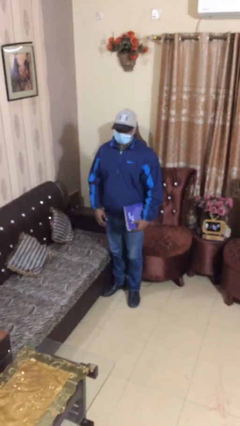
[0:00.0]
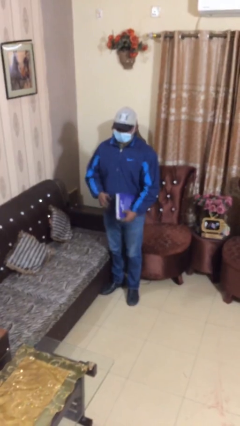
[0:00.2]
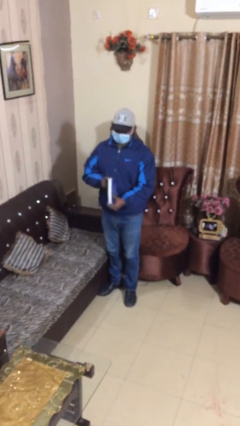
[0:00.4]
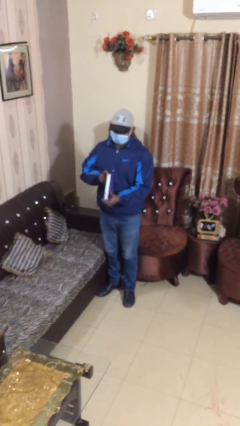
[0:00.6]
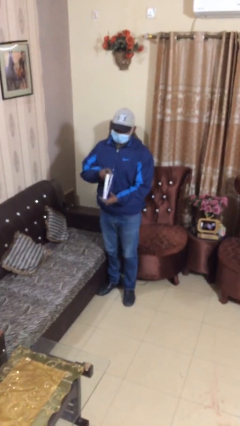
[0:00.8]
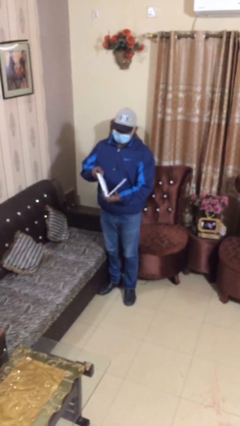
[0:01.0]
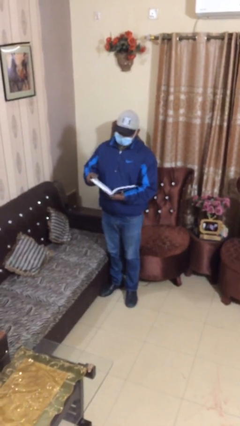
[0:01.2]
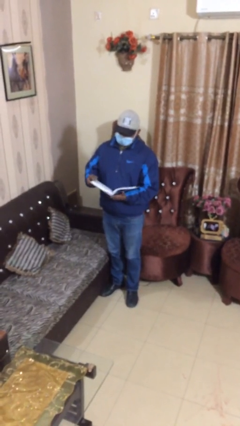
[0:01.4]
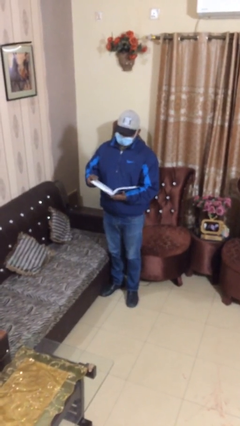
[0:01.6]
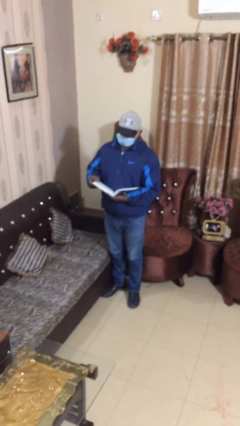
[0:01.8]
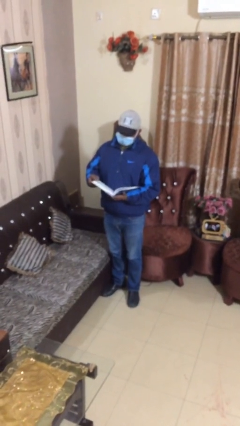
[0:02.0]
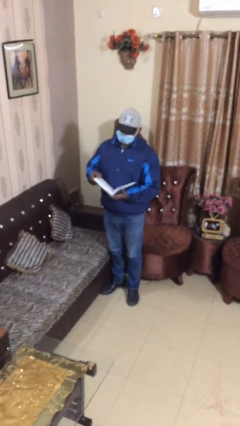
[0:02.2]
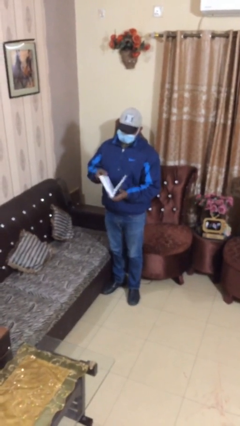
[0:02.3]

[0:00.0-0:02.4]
person reads document

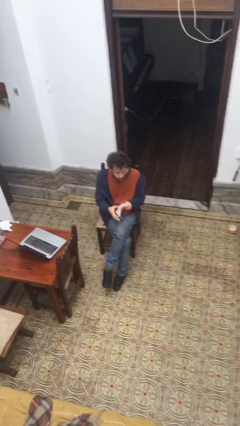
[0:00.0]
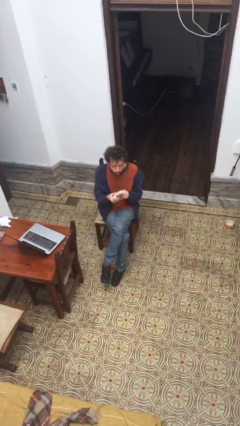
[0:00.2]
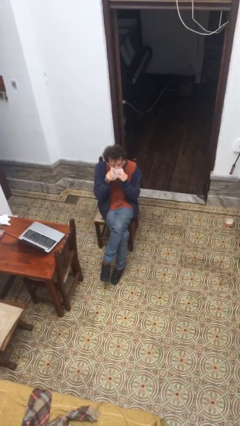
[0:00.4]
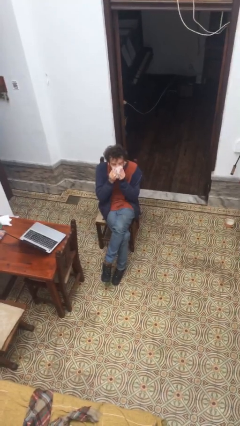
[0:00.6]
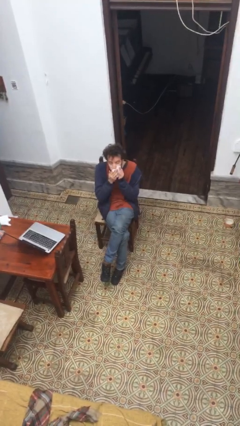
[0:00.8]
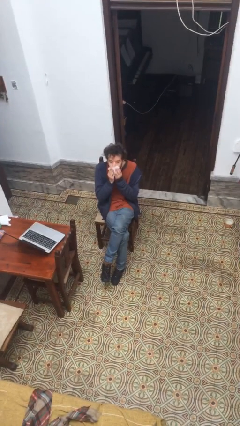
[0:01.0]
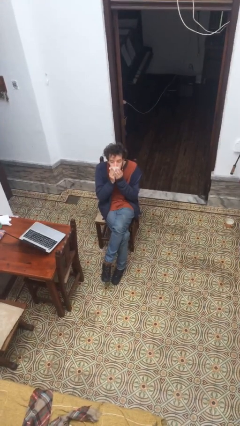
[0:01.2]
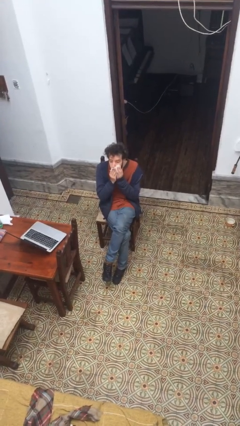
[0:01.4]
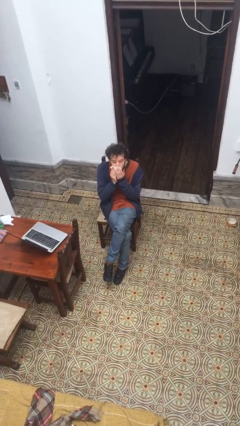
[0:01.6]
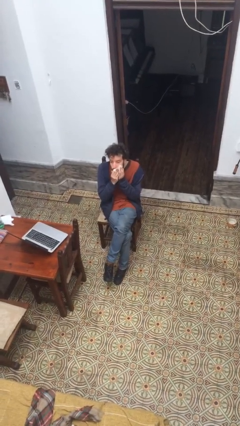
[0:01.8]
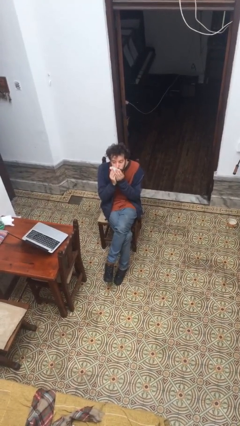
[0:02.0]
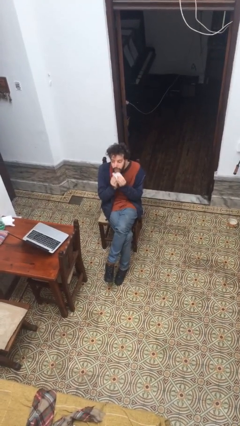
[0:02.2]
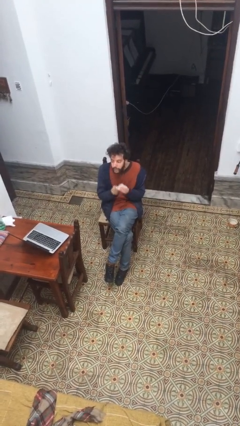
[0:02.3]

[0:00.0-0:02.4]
person wipes mouth with napkin

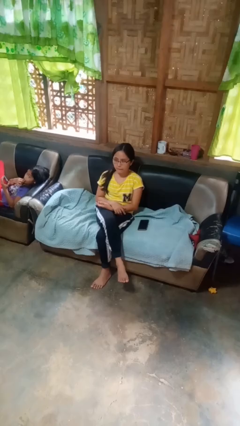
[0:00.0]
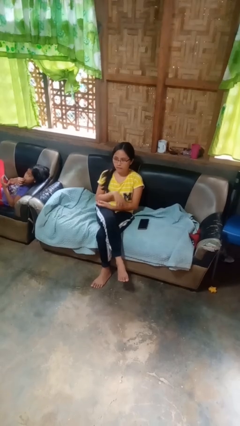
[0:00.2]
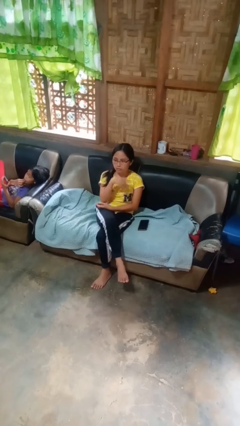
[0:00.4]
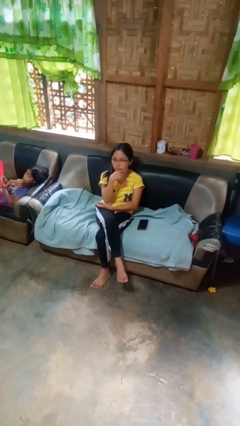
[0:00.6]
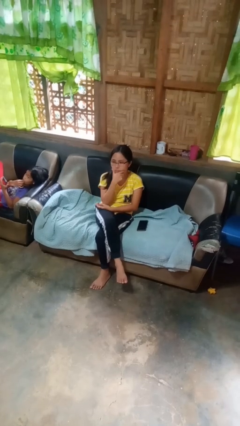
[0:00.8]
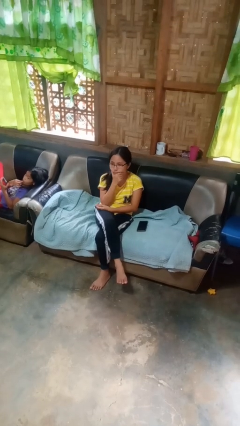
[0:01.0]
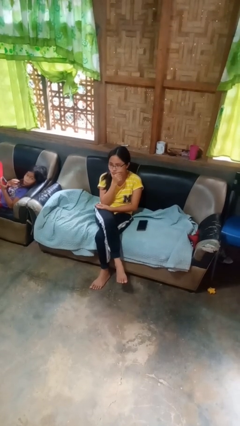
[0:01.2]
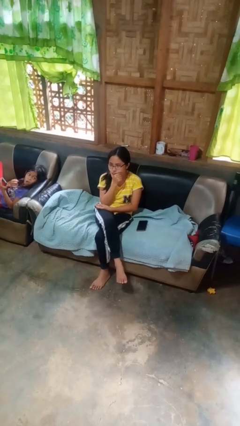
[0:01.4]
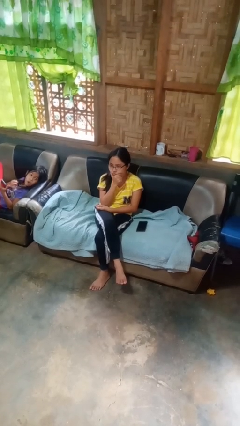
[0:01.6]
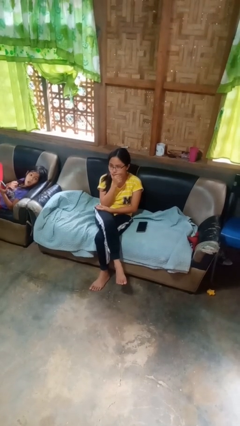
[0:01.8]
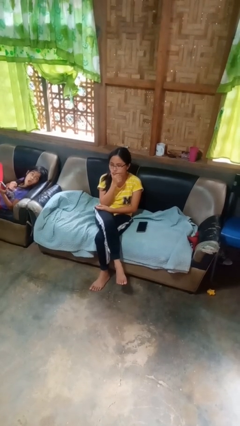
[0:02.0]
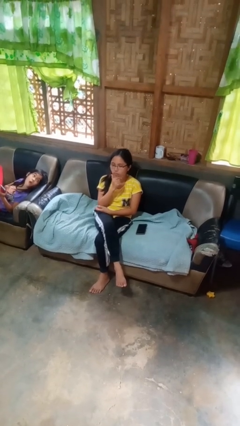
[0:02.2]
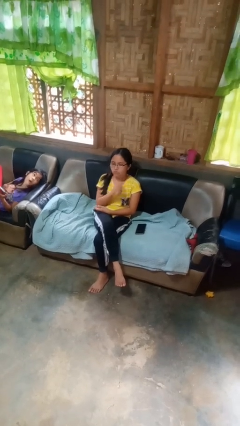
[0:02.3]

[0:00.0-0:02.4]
person strokes chin

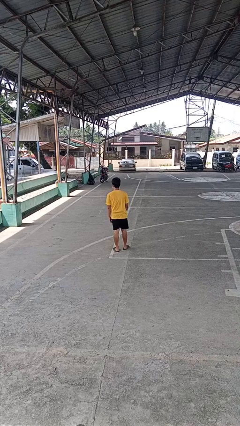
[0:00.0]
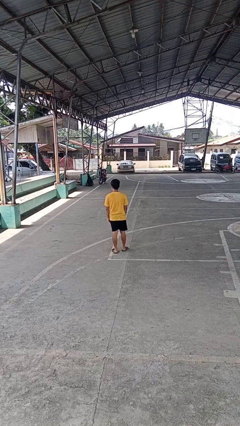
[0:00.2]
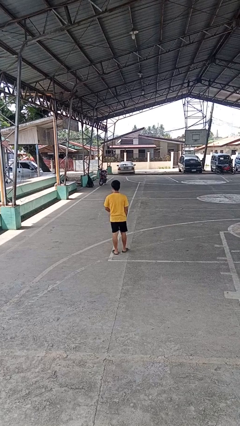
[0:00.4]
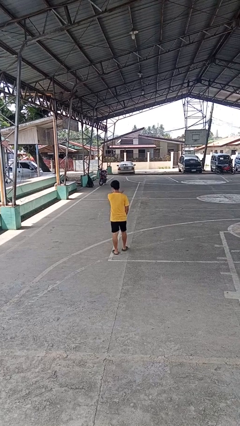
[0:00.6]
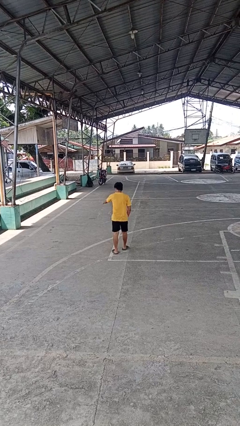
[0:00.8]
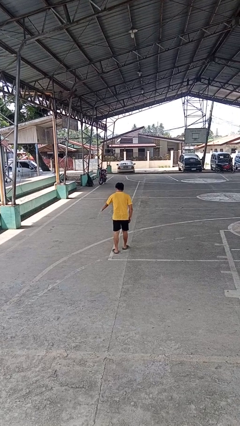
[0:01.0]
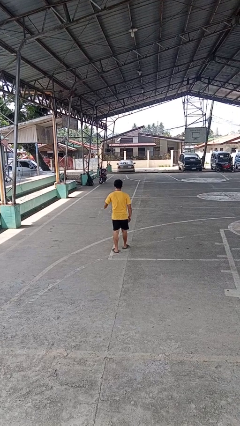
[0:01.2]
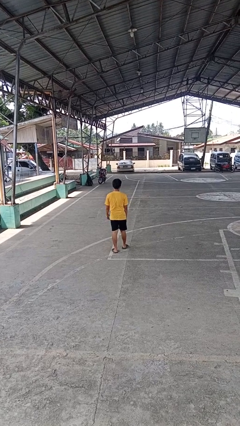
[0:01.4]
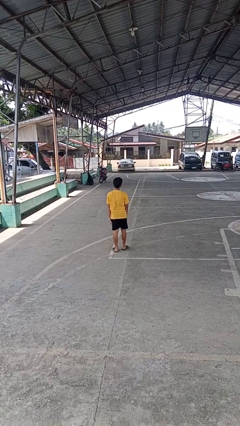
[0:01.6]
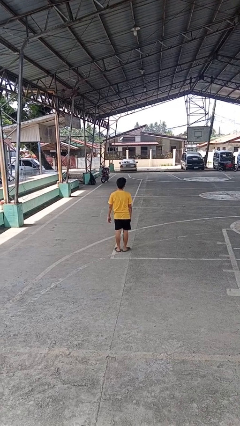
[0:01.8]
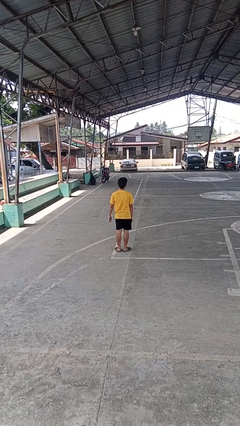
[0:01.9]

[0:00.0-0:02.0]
person karate chop

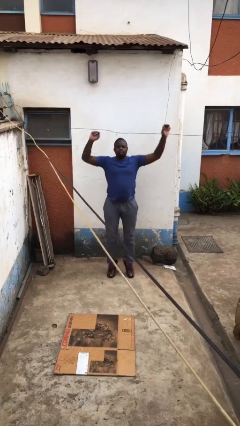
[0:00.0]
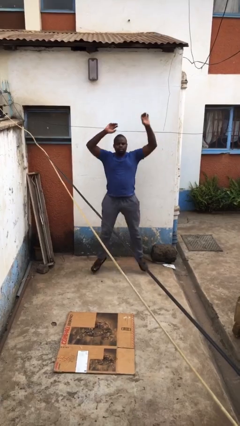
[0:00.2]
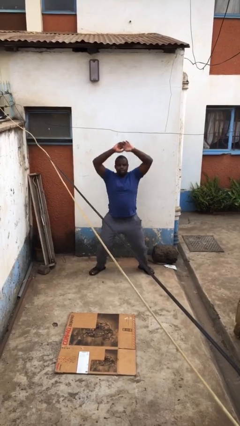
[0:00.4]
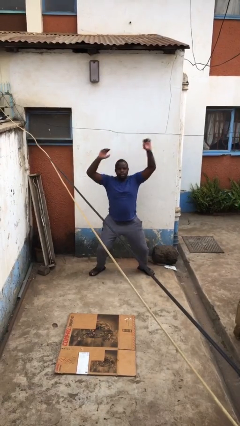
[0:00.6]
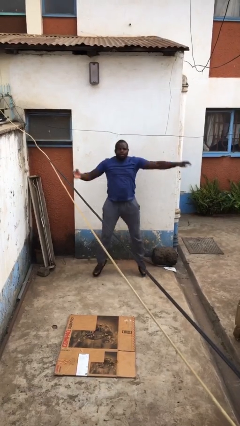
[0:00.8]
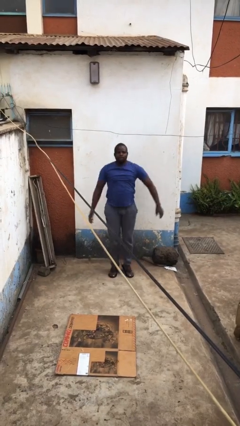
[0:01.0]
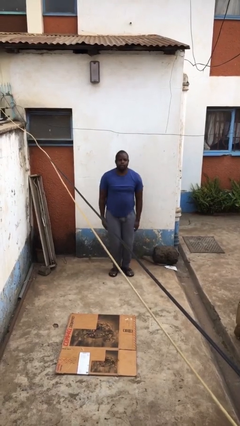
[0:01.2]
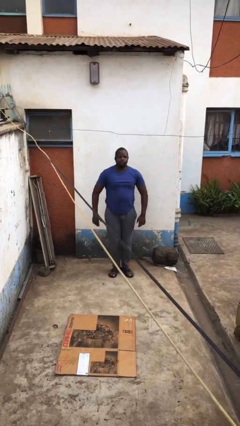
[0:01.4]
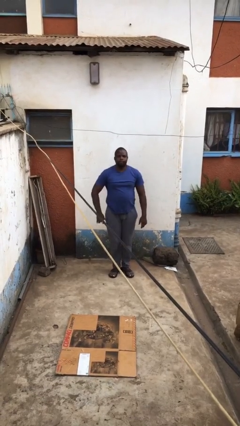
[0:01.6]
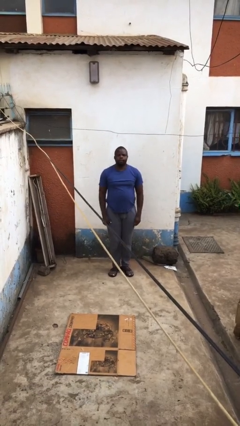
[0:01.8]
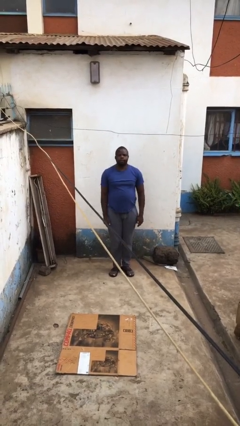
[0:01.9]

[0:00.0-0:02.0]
person exercises with jumping jacks

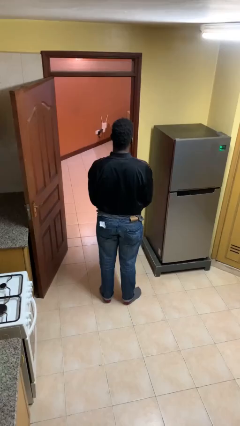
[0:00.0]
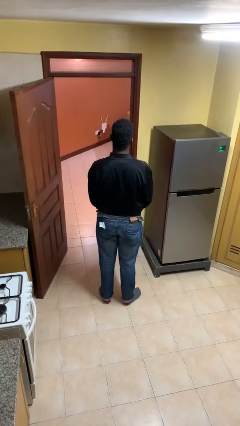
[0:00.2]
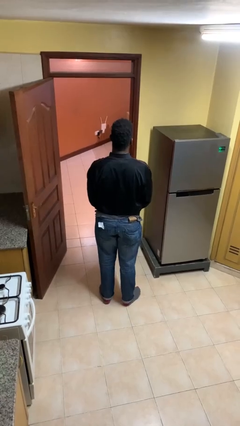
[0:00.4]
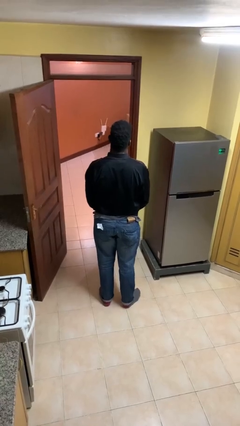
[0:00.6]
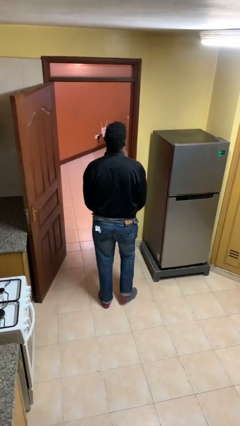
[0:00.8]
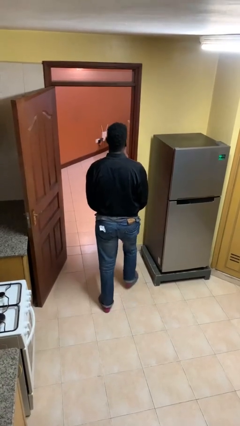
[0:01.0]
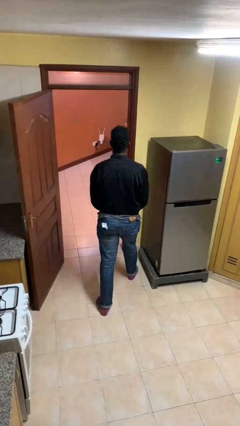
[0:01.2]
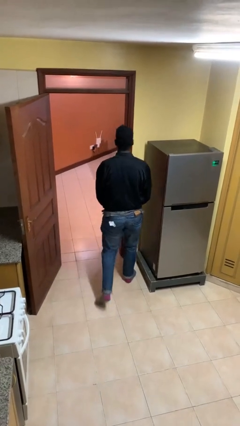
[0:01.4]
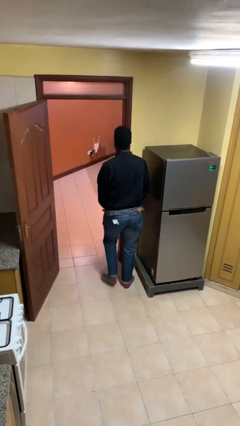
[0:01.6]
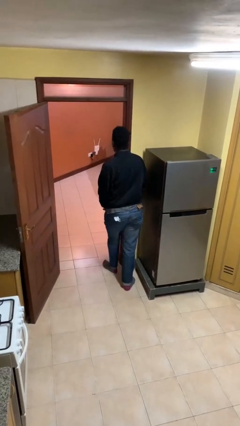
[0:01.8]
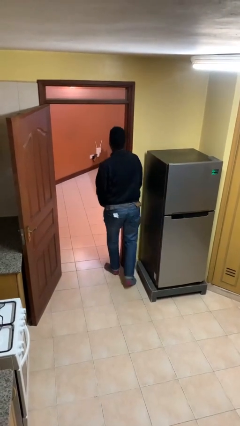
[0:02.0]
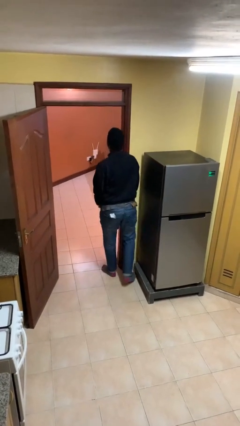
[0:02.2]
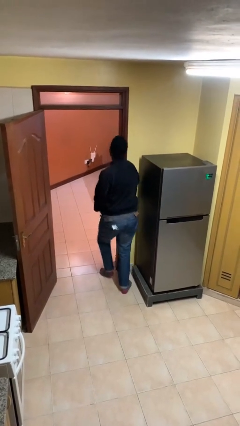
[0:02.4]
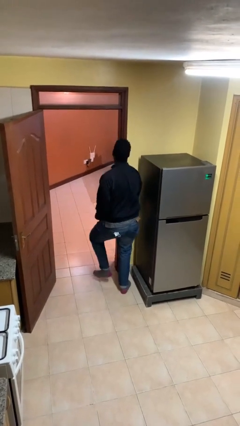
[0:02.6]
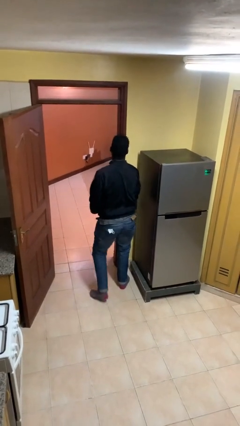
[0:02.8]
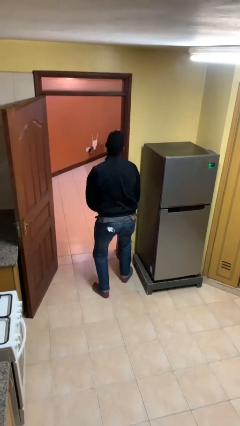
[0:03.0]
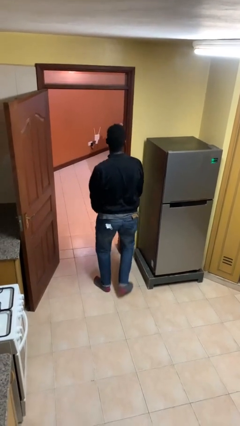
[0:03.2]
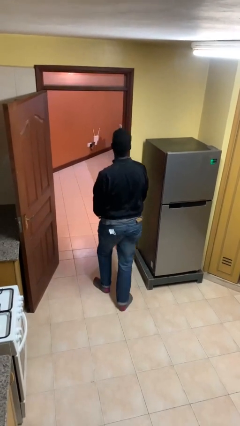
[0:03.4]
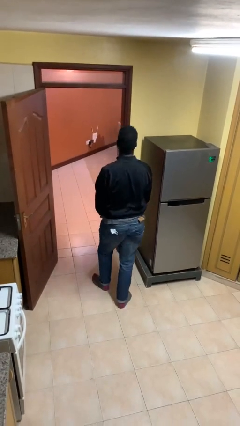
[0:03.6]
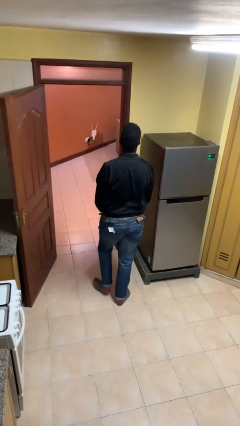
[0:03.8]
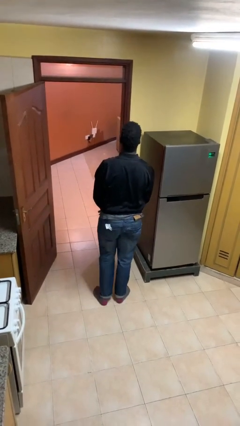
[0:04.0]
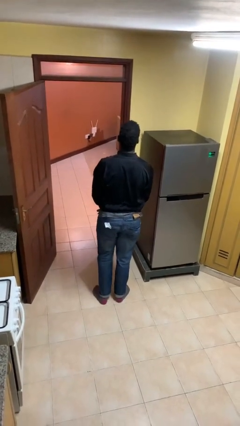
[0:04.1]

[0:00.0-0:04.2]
person bumps into wall

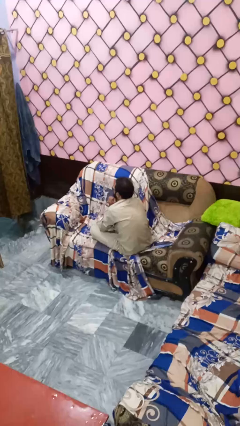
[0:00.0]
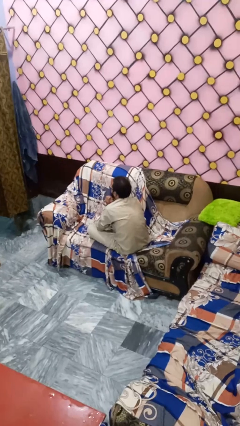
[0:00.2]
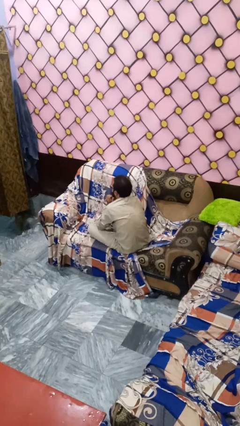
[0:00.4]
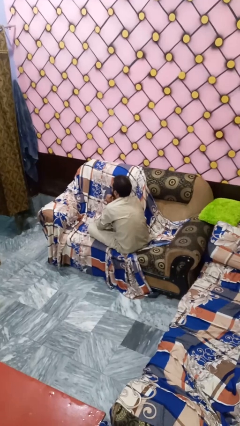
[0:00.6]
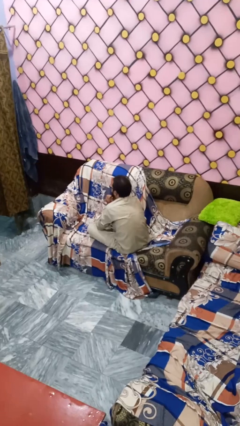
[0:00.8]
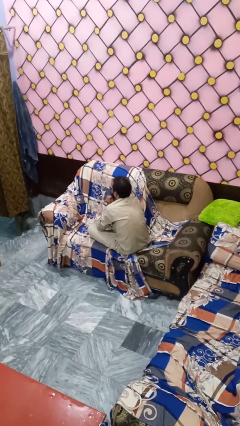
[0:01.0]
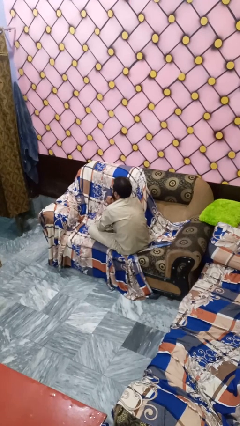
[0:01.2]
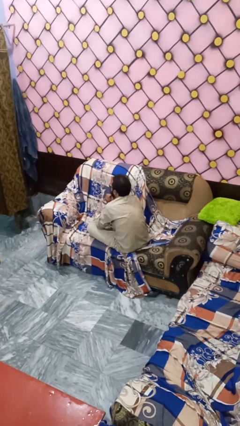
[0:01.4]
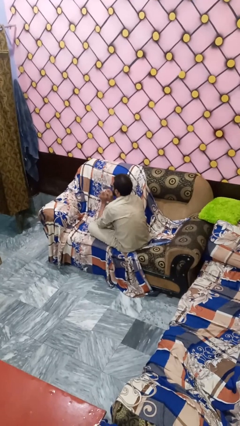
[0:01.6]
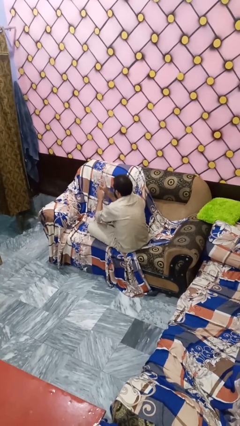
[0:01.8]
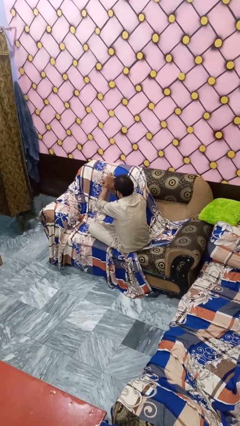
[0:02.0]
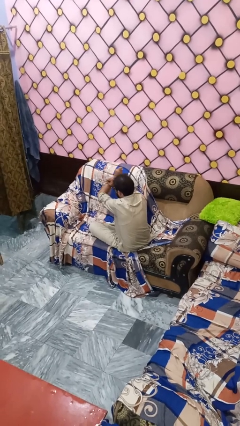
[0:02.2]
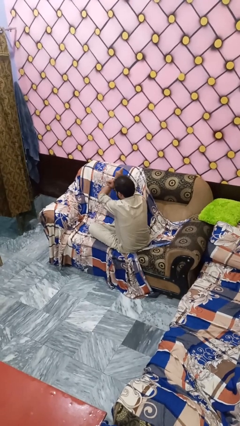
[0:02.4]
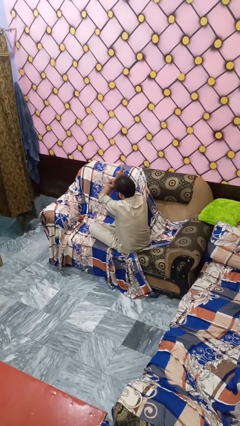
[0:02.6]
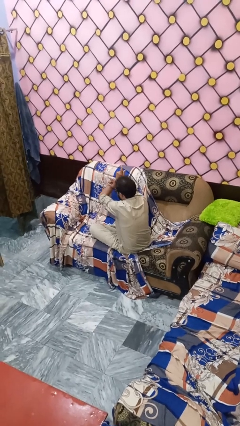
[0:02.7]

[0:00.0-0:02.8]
person gestures cut
